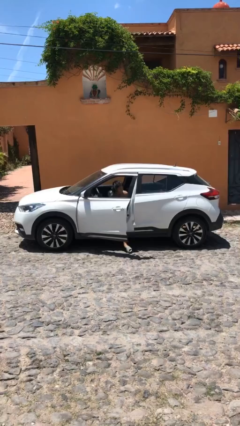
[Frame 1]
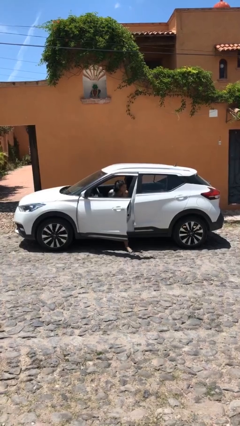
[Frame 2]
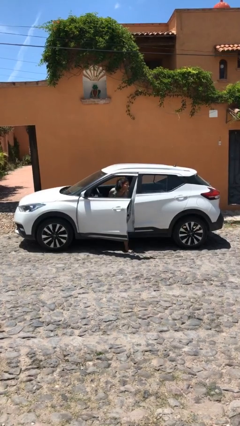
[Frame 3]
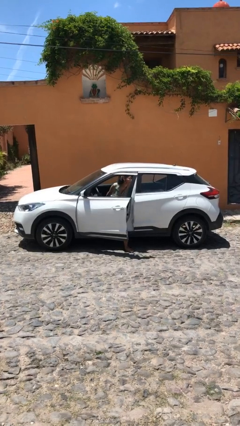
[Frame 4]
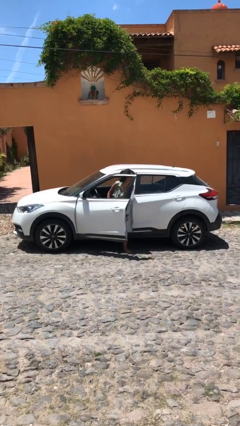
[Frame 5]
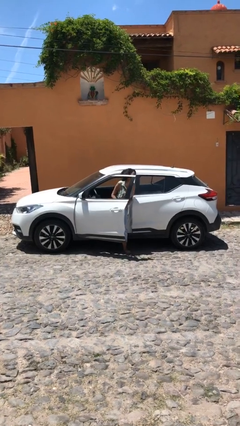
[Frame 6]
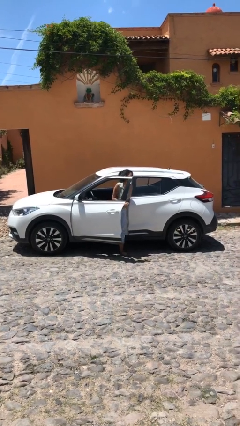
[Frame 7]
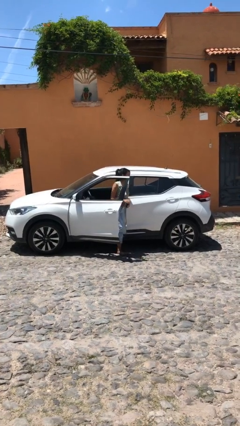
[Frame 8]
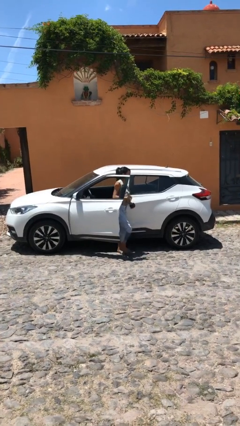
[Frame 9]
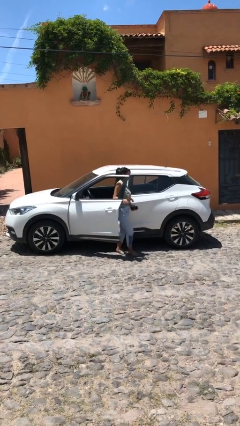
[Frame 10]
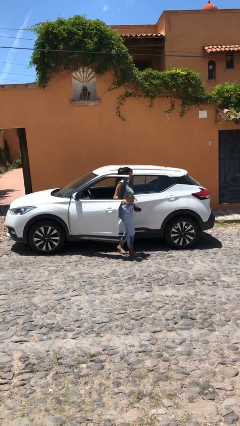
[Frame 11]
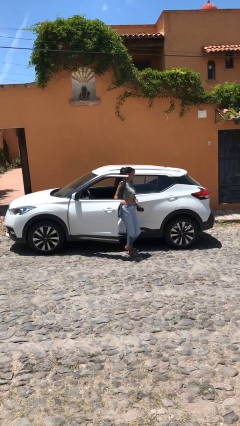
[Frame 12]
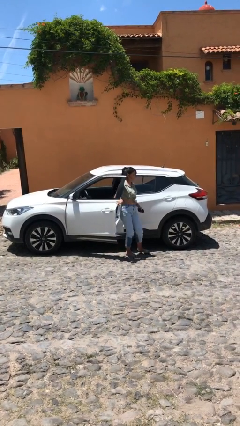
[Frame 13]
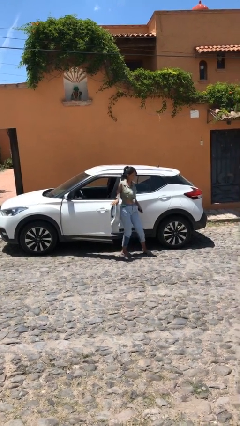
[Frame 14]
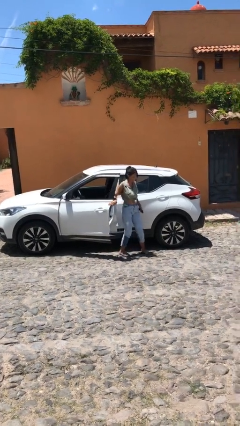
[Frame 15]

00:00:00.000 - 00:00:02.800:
person exits car

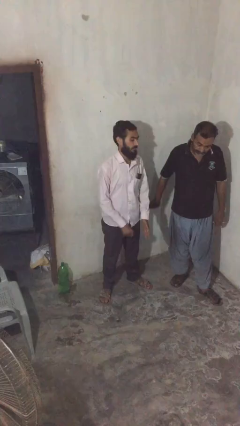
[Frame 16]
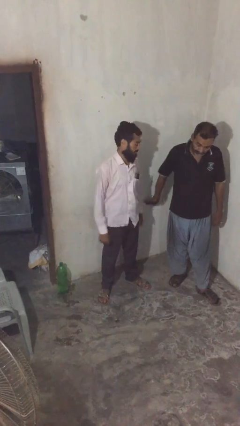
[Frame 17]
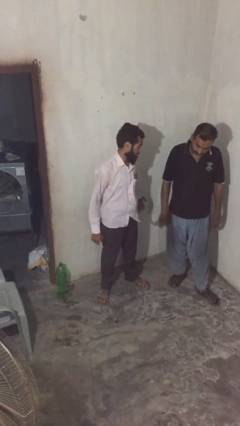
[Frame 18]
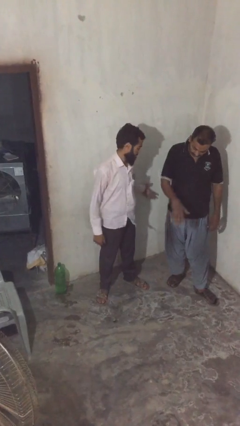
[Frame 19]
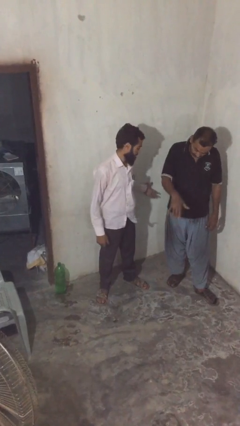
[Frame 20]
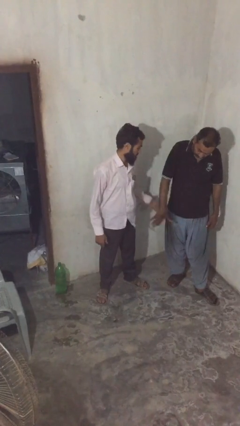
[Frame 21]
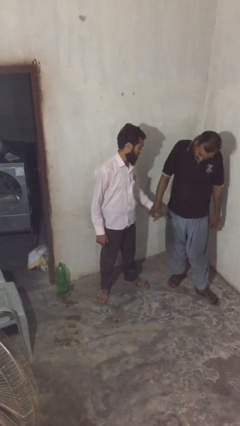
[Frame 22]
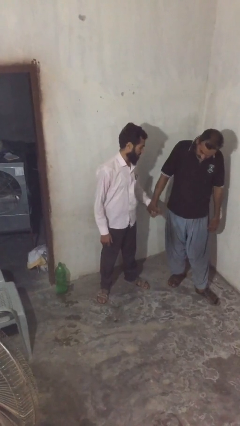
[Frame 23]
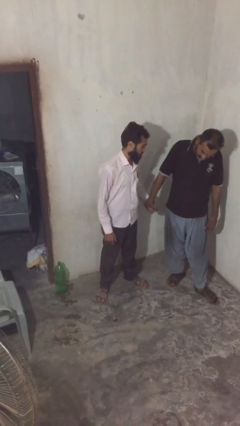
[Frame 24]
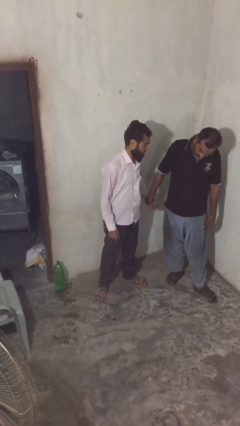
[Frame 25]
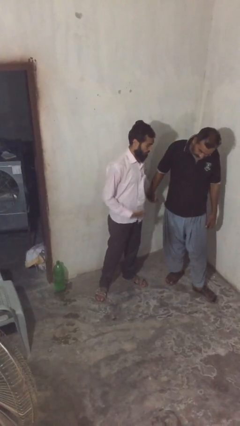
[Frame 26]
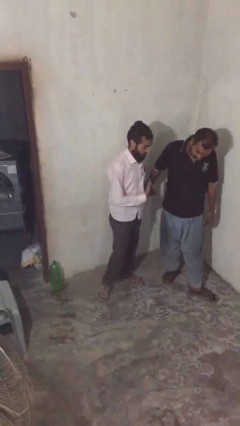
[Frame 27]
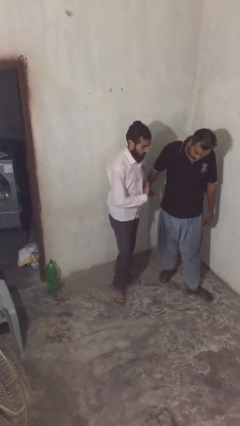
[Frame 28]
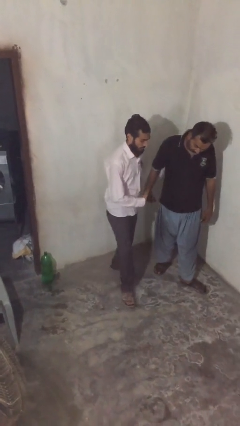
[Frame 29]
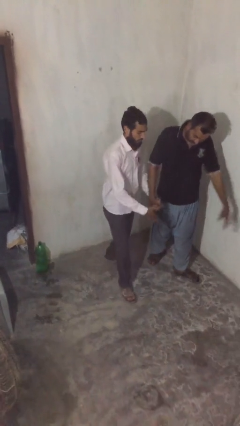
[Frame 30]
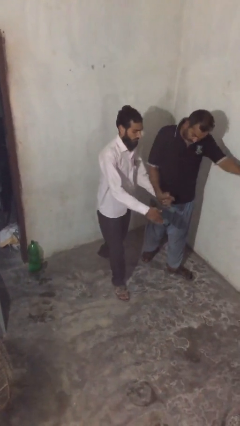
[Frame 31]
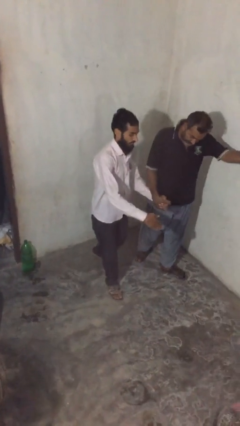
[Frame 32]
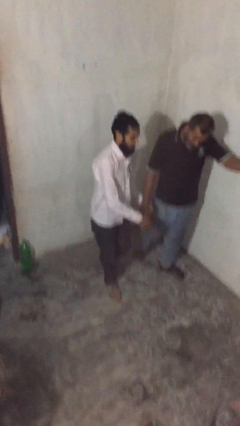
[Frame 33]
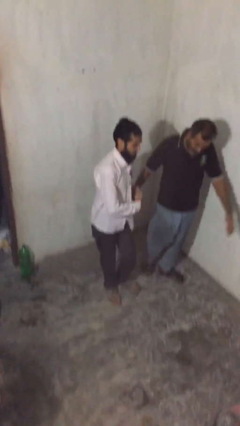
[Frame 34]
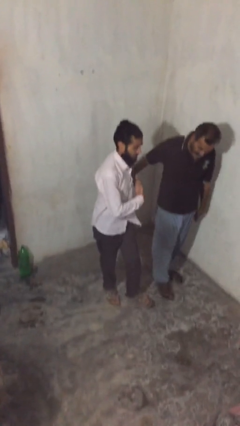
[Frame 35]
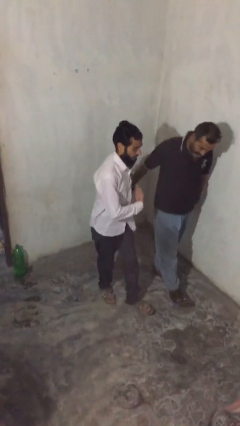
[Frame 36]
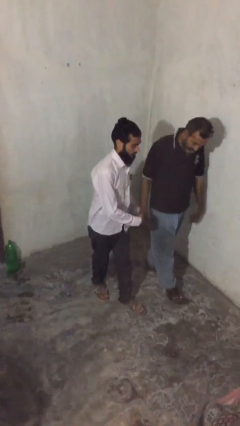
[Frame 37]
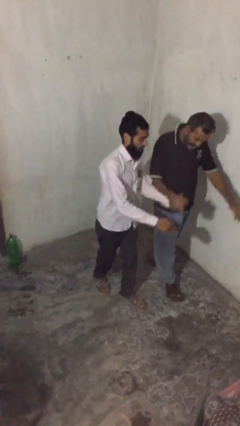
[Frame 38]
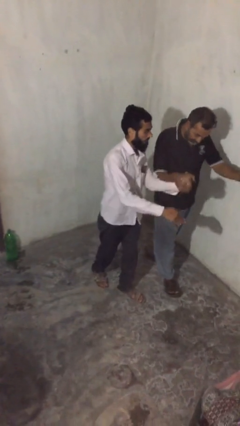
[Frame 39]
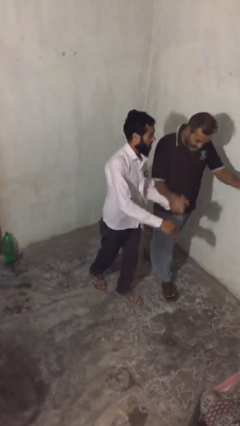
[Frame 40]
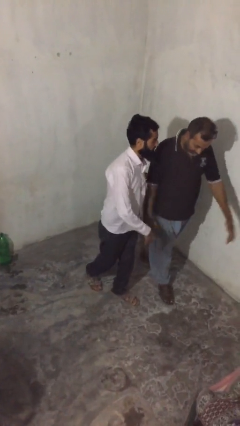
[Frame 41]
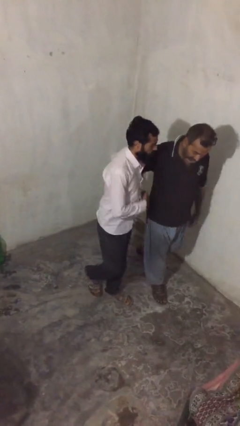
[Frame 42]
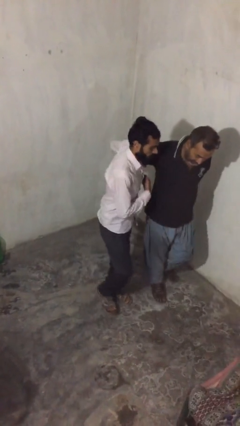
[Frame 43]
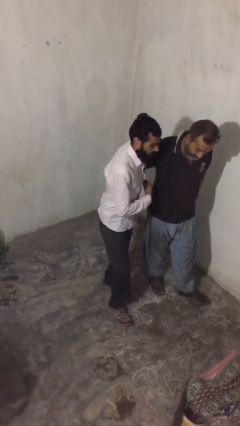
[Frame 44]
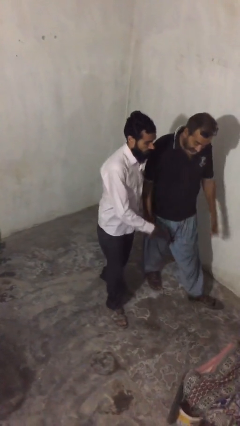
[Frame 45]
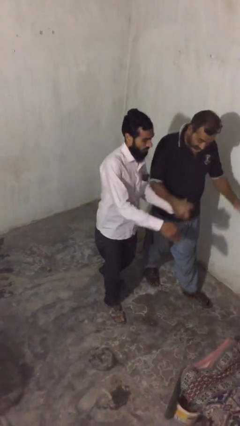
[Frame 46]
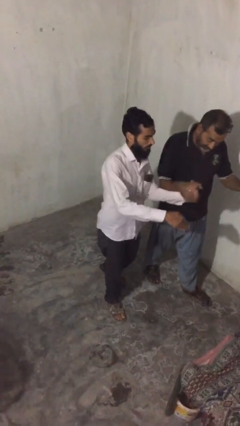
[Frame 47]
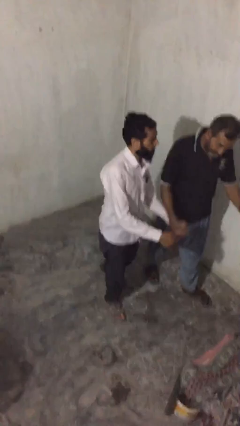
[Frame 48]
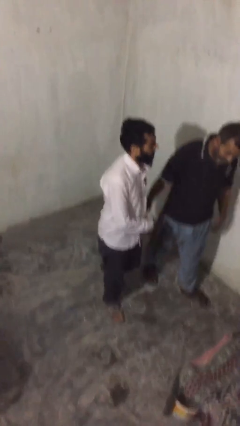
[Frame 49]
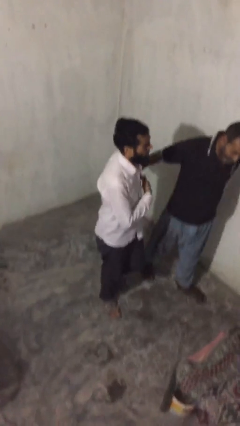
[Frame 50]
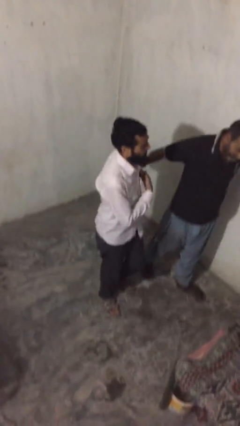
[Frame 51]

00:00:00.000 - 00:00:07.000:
person holds hand

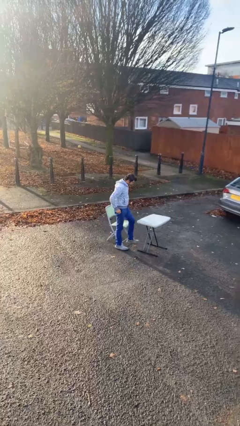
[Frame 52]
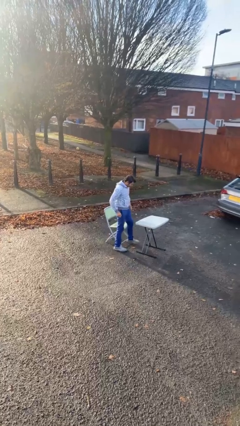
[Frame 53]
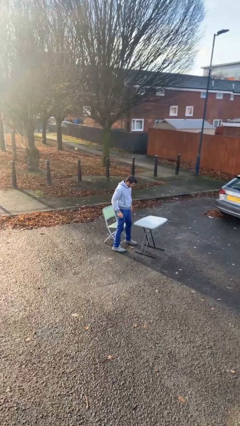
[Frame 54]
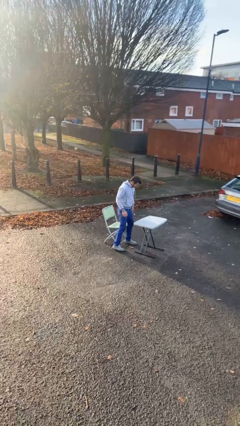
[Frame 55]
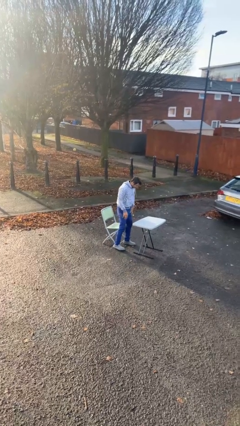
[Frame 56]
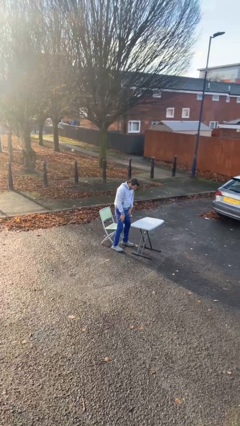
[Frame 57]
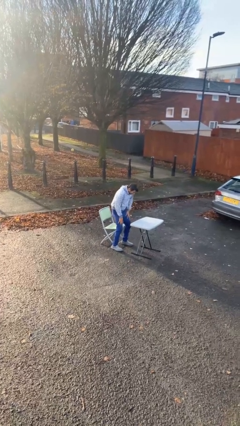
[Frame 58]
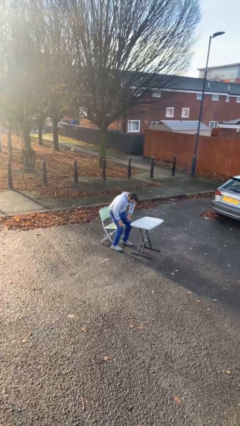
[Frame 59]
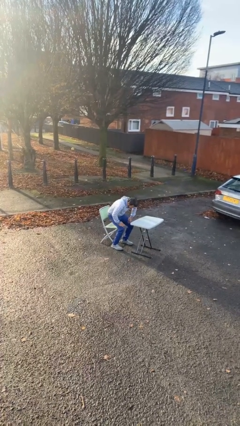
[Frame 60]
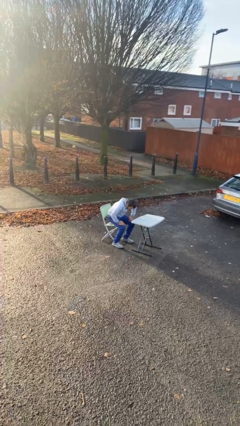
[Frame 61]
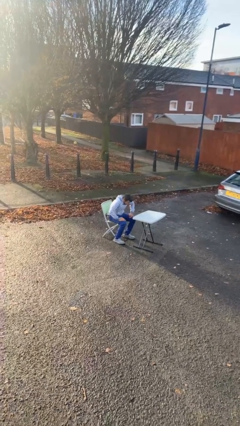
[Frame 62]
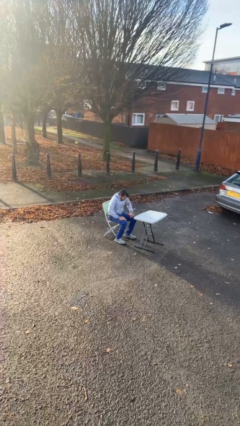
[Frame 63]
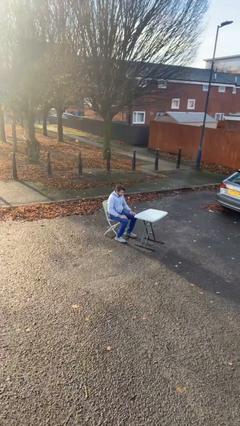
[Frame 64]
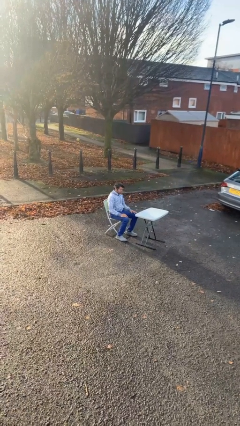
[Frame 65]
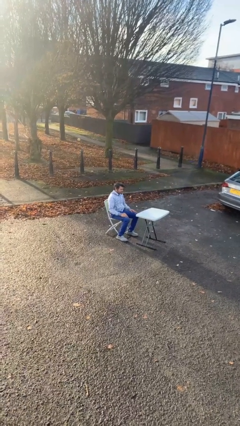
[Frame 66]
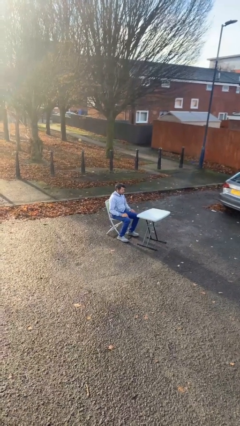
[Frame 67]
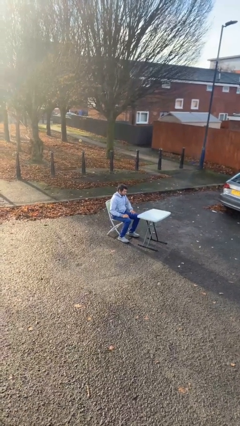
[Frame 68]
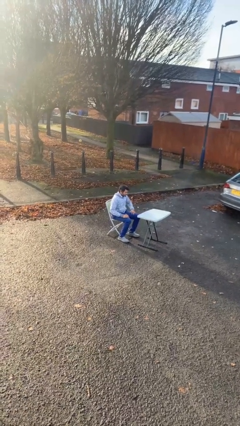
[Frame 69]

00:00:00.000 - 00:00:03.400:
person sits down

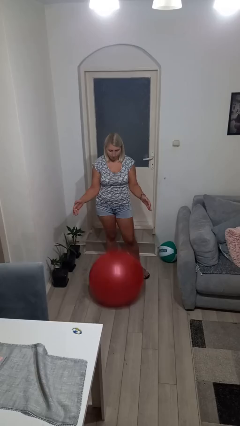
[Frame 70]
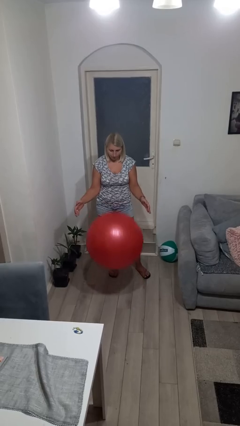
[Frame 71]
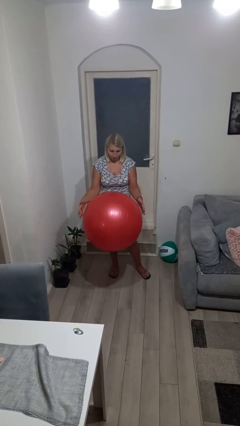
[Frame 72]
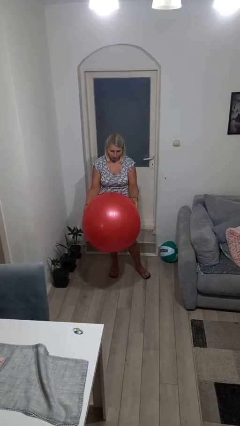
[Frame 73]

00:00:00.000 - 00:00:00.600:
person bounces ball on floor

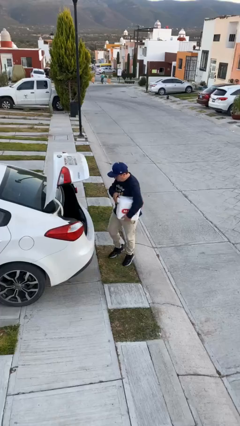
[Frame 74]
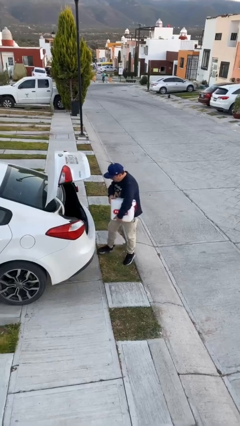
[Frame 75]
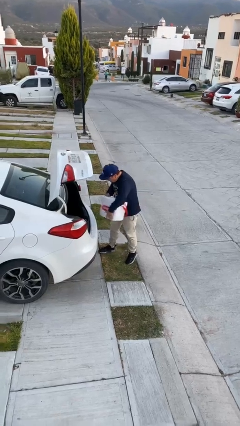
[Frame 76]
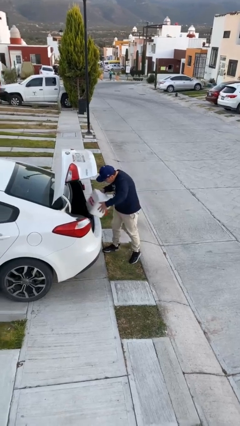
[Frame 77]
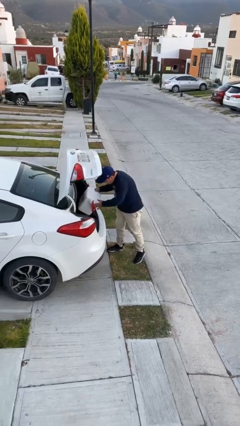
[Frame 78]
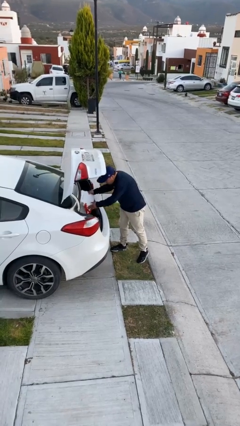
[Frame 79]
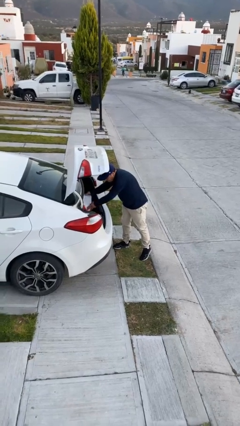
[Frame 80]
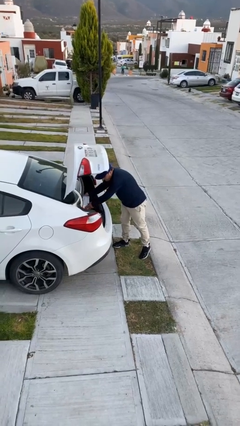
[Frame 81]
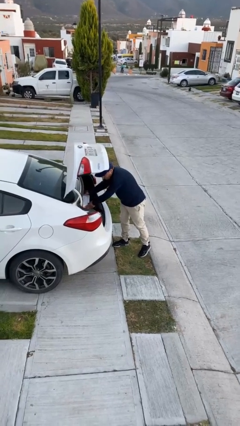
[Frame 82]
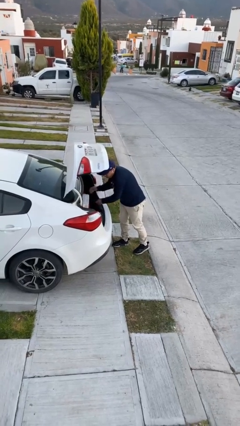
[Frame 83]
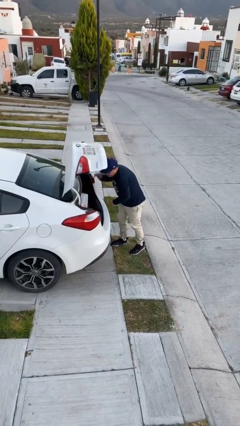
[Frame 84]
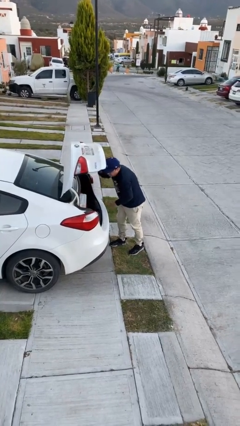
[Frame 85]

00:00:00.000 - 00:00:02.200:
person loads car

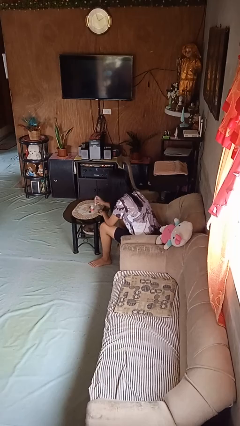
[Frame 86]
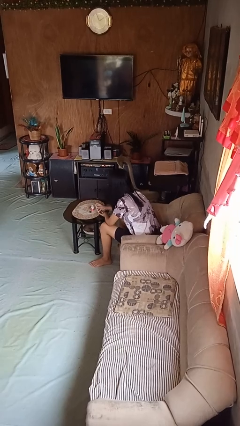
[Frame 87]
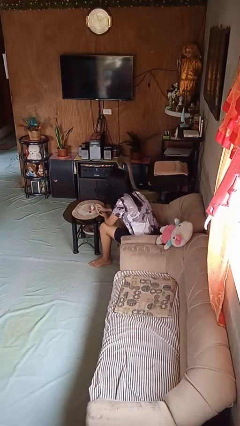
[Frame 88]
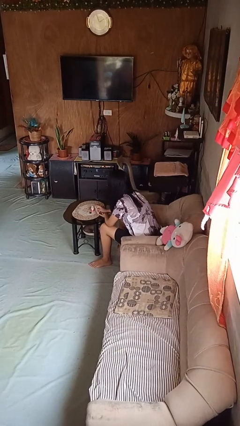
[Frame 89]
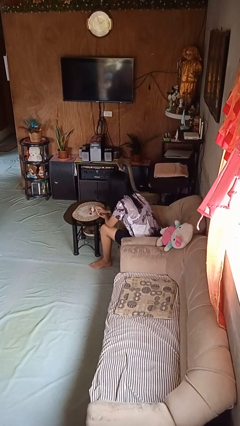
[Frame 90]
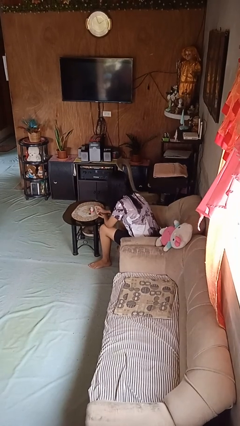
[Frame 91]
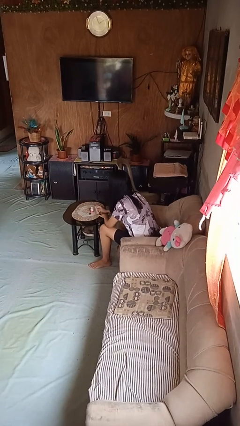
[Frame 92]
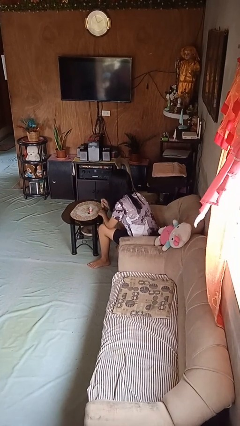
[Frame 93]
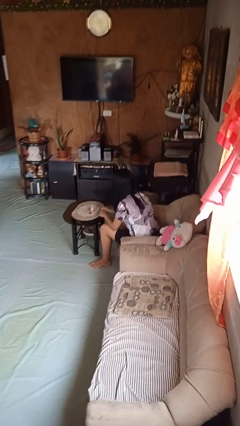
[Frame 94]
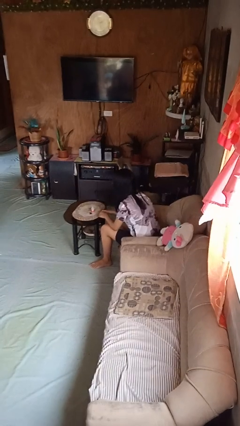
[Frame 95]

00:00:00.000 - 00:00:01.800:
person paints fingernails
